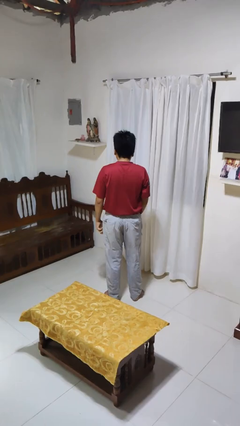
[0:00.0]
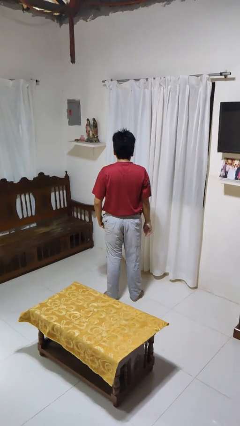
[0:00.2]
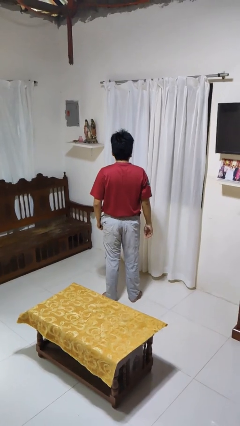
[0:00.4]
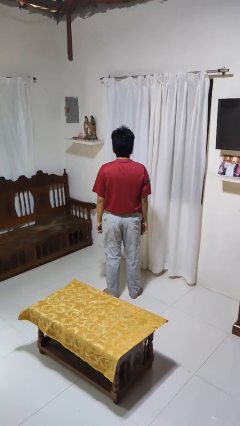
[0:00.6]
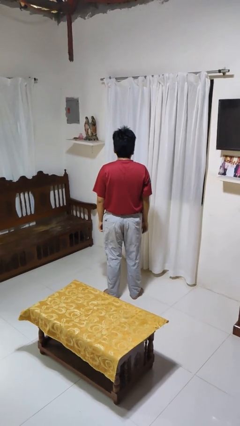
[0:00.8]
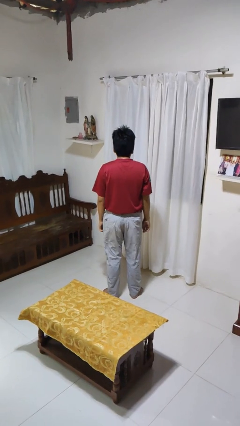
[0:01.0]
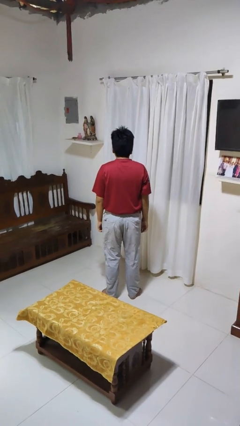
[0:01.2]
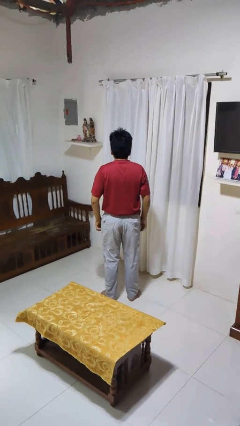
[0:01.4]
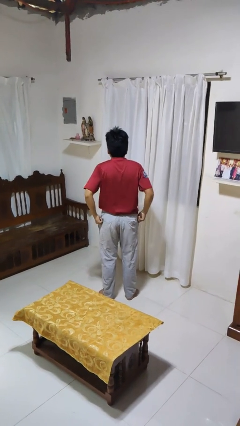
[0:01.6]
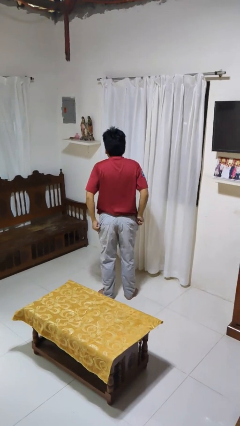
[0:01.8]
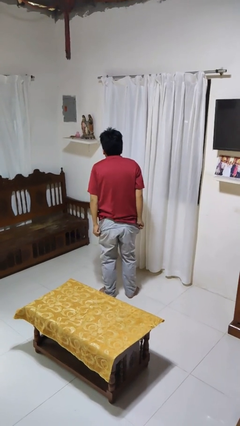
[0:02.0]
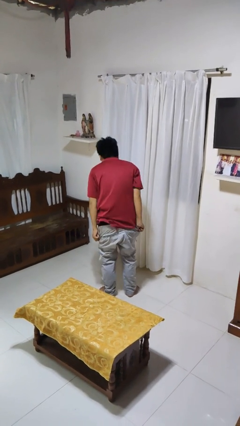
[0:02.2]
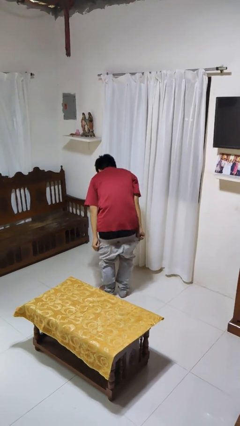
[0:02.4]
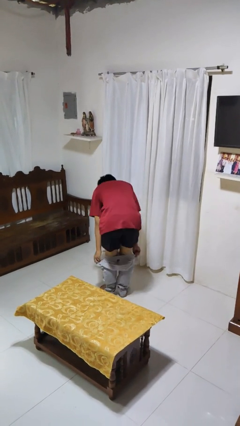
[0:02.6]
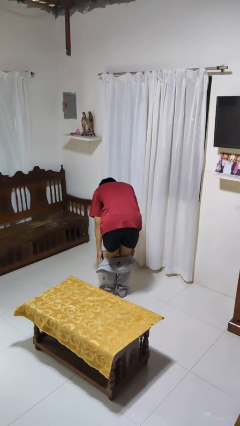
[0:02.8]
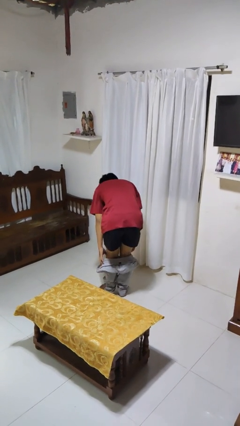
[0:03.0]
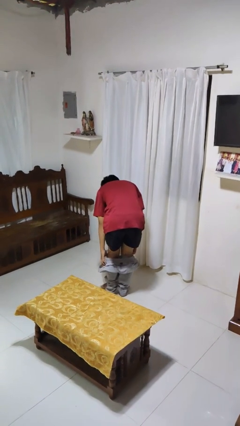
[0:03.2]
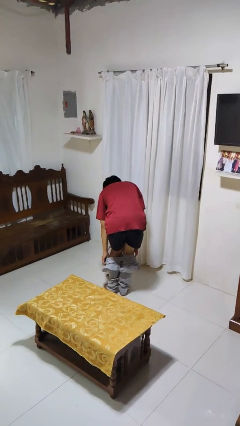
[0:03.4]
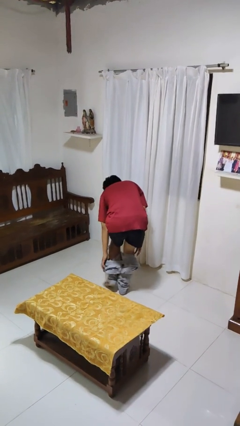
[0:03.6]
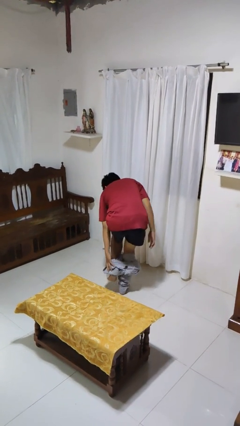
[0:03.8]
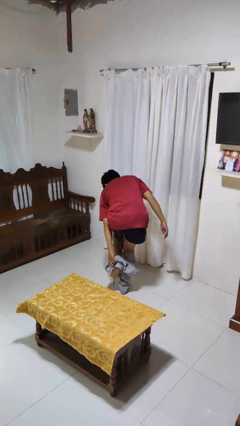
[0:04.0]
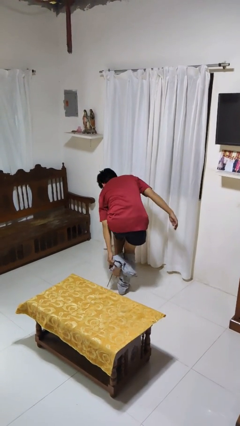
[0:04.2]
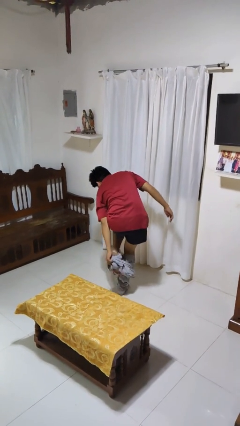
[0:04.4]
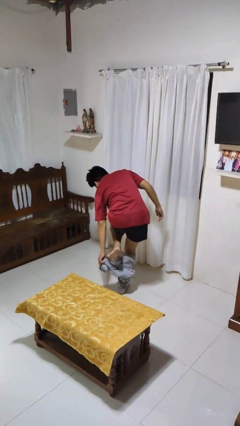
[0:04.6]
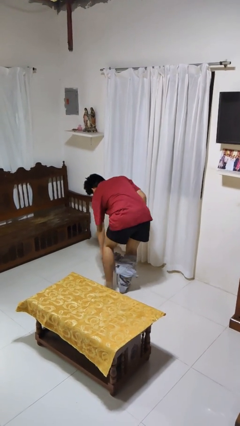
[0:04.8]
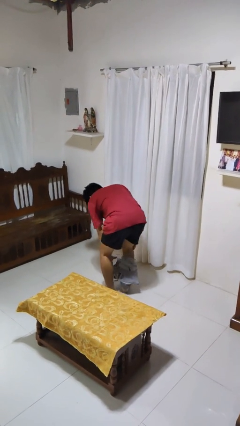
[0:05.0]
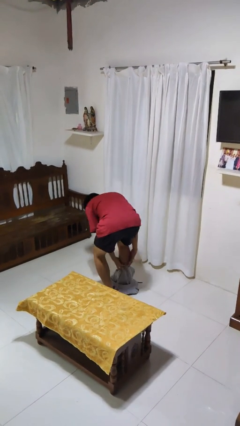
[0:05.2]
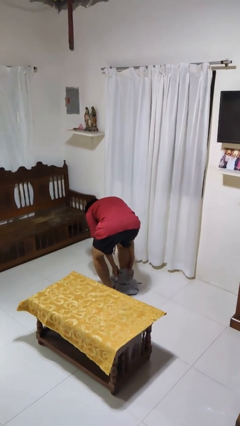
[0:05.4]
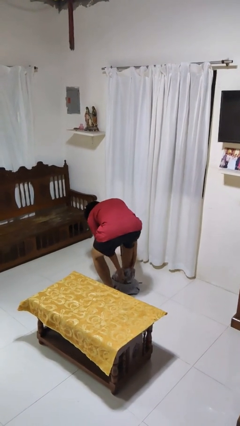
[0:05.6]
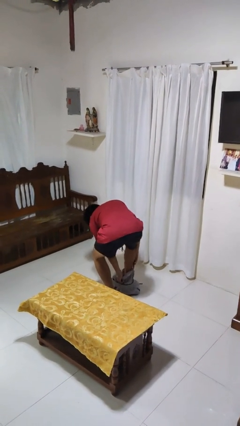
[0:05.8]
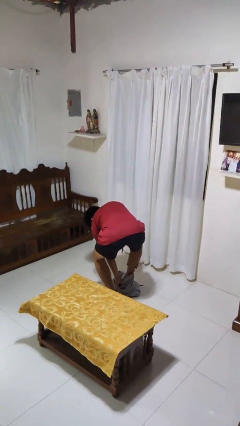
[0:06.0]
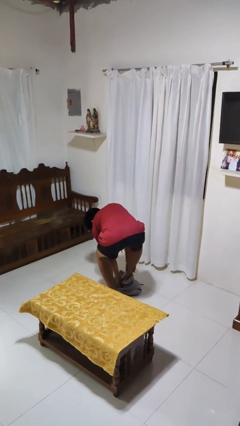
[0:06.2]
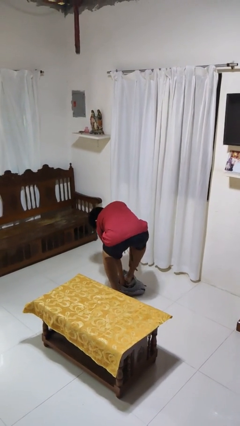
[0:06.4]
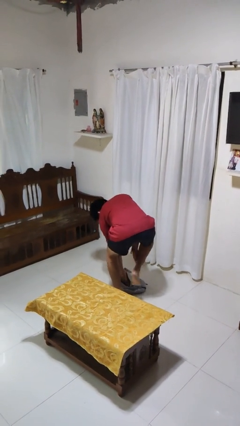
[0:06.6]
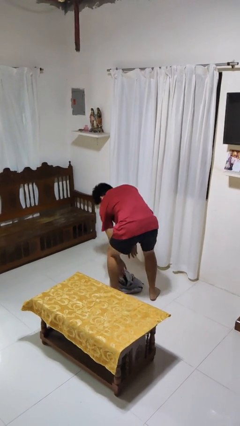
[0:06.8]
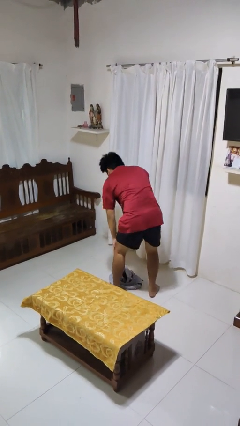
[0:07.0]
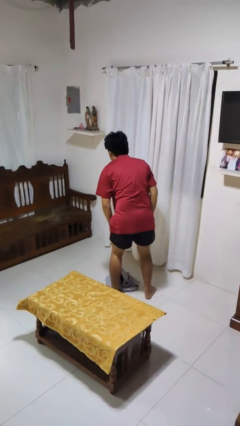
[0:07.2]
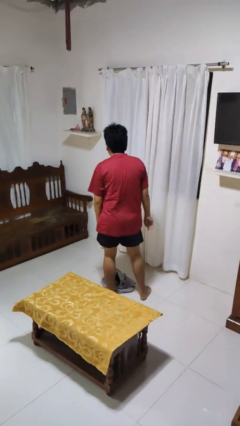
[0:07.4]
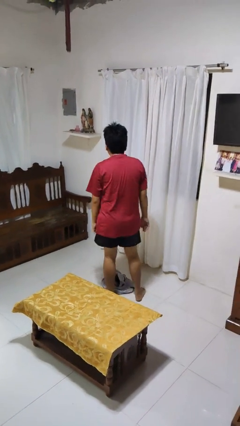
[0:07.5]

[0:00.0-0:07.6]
person takes off pants

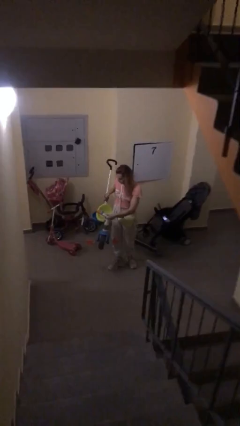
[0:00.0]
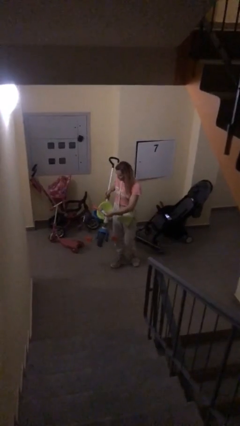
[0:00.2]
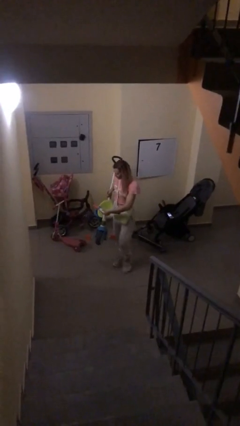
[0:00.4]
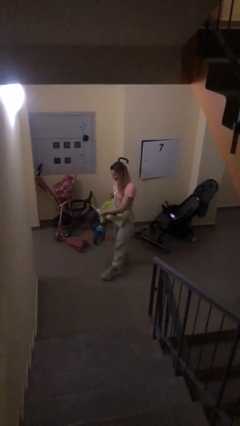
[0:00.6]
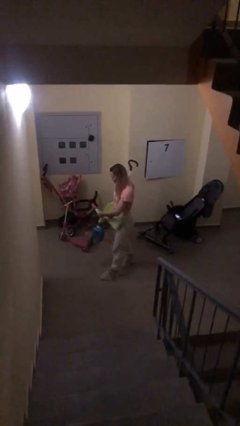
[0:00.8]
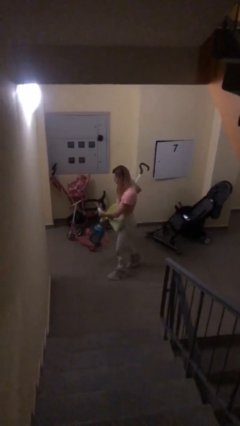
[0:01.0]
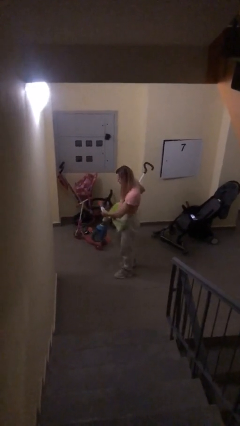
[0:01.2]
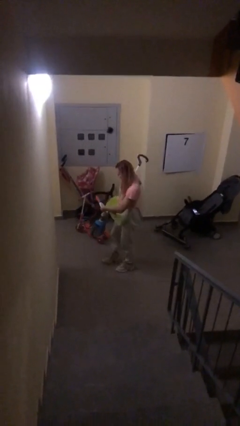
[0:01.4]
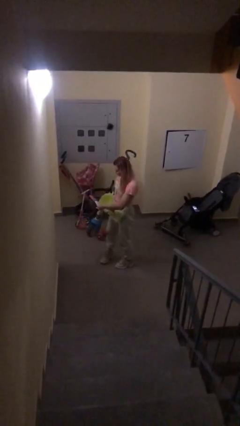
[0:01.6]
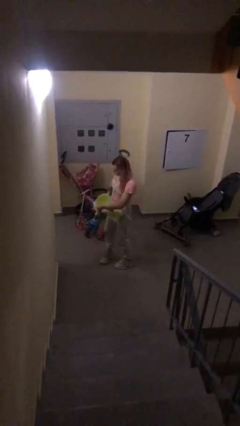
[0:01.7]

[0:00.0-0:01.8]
person carries bicycle

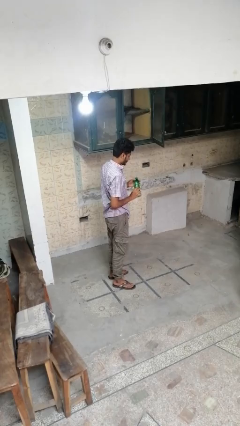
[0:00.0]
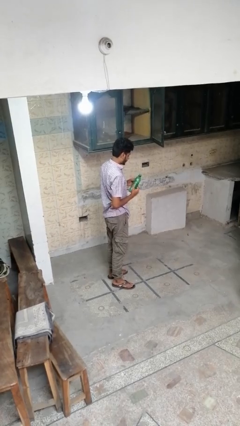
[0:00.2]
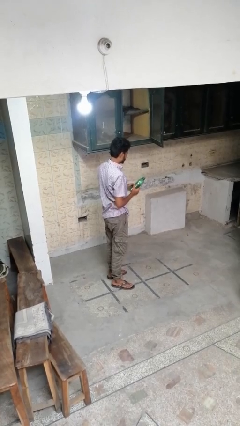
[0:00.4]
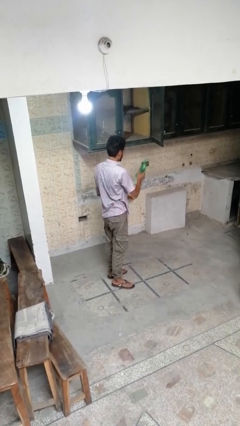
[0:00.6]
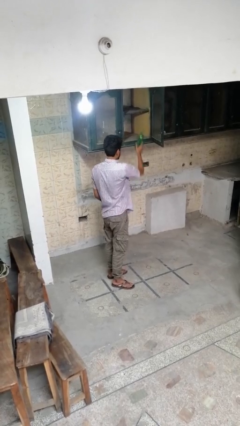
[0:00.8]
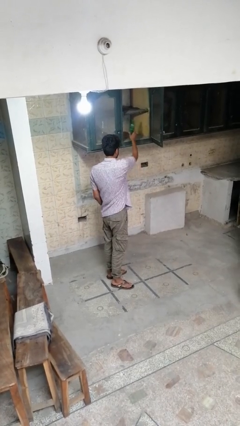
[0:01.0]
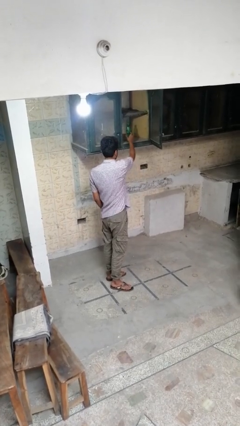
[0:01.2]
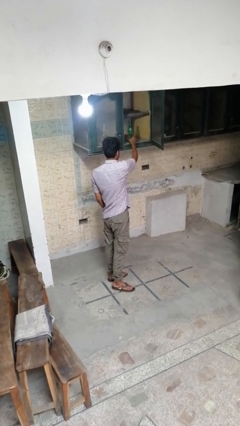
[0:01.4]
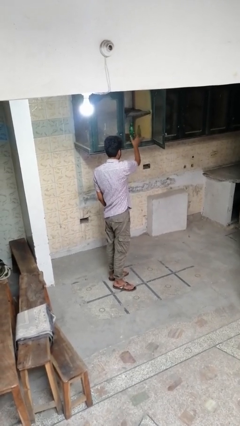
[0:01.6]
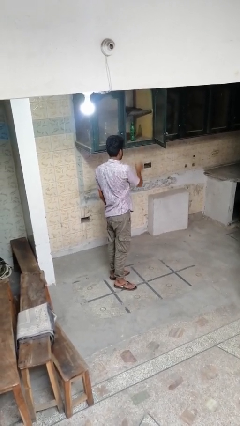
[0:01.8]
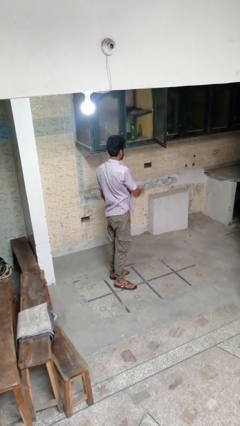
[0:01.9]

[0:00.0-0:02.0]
person puts down object into cabinet

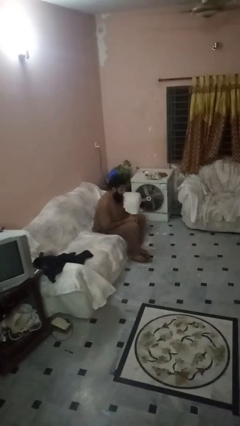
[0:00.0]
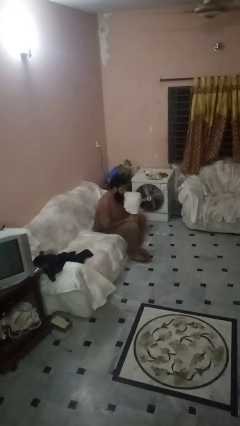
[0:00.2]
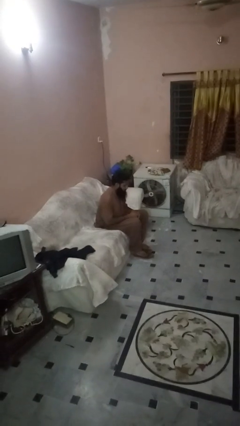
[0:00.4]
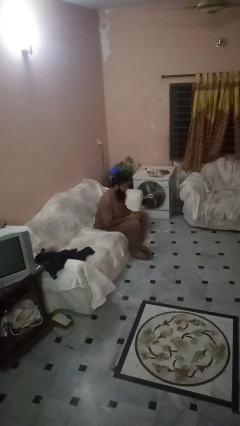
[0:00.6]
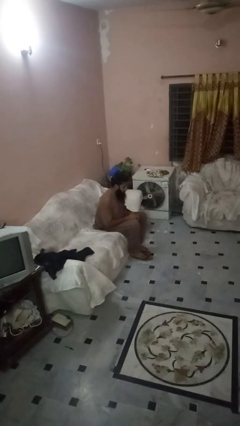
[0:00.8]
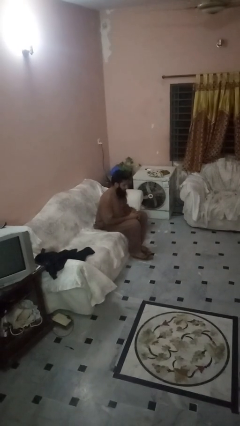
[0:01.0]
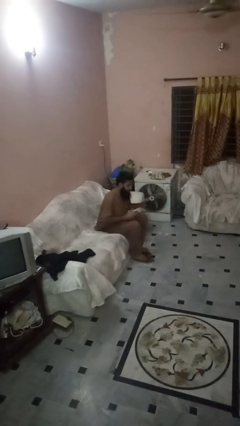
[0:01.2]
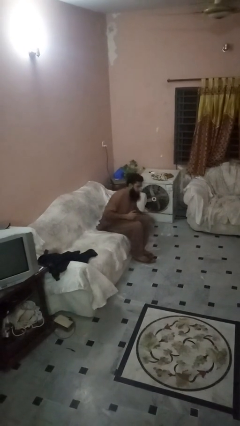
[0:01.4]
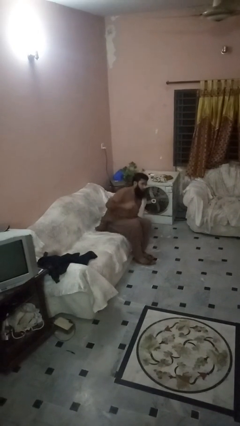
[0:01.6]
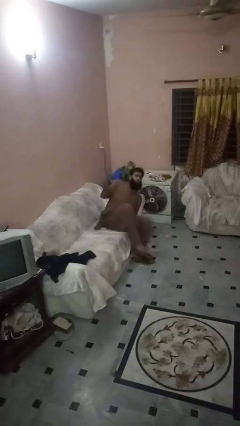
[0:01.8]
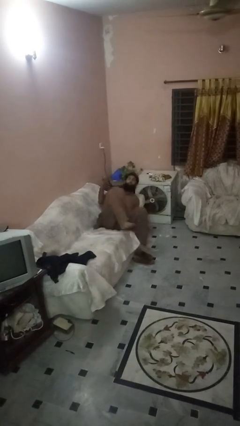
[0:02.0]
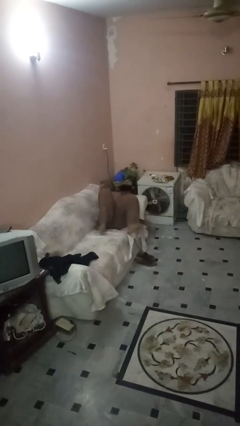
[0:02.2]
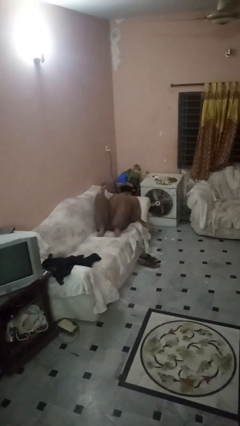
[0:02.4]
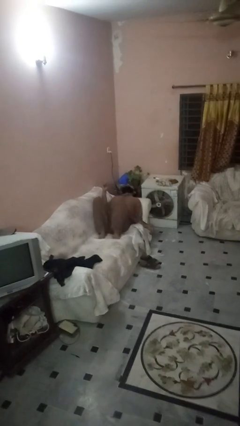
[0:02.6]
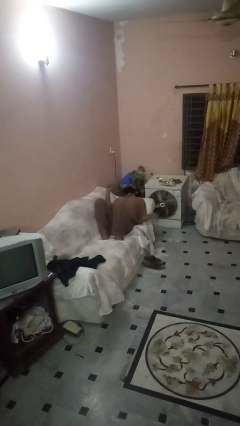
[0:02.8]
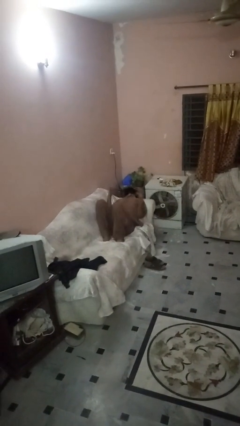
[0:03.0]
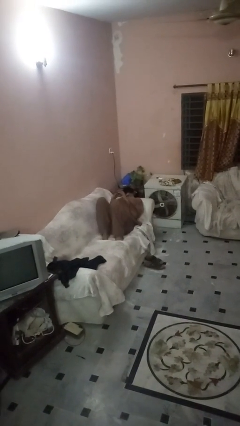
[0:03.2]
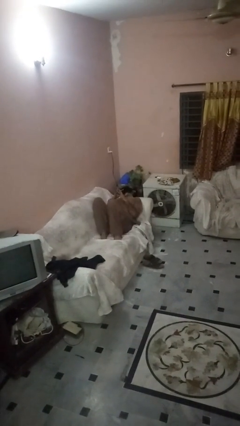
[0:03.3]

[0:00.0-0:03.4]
person lies down on couch

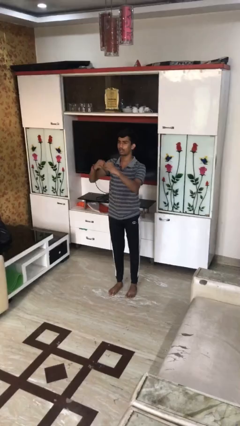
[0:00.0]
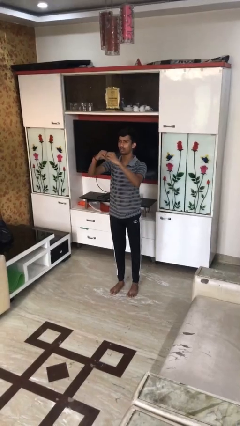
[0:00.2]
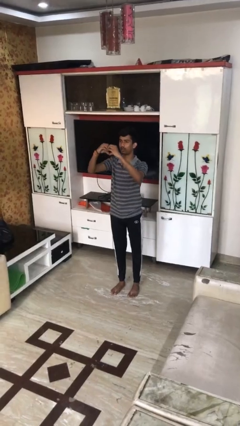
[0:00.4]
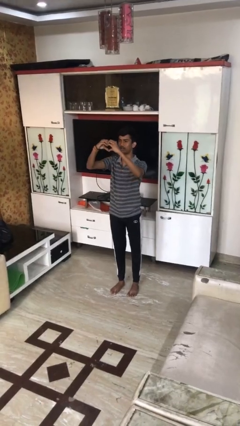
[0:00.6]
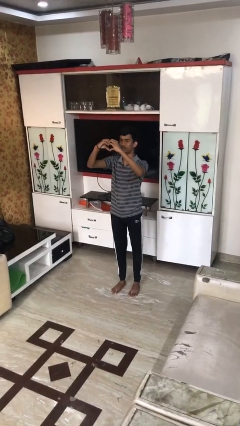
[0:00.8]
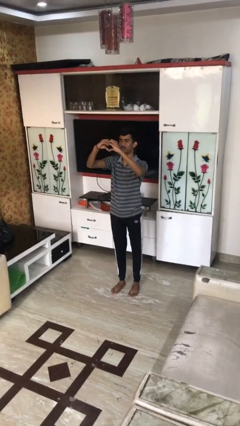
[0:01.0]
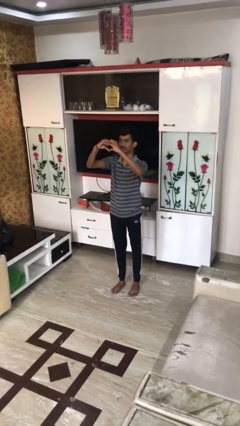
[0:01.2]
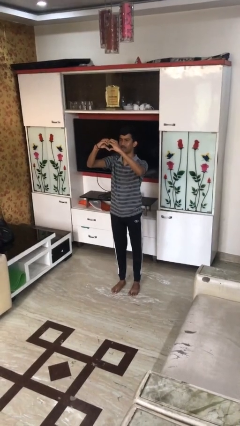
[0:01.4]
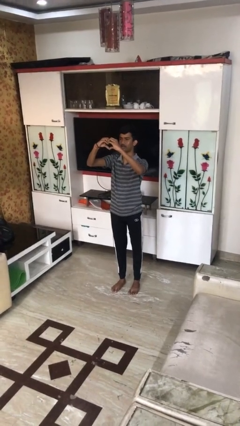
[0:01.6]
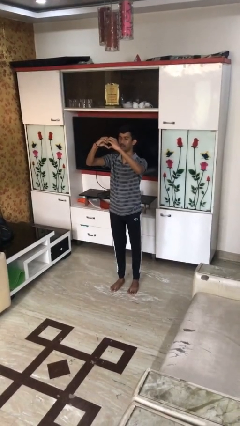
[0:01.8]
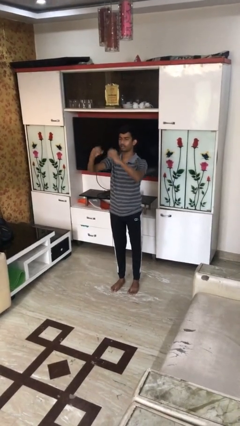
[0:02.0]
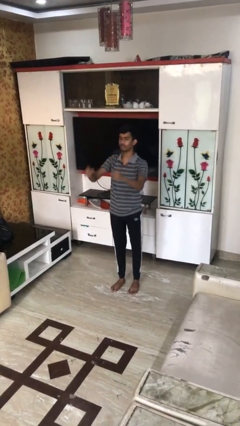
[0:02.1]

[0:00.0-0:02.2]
person gestures heart

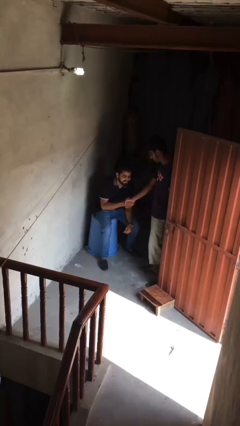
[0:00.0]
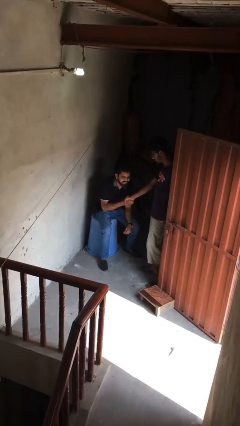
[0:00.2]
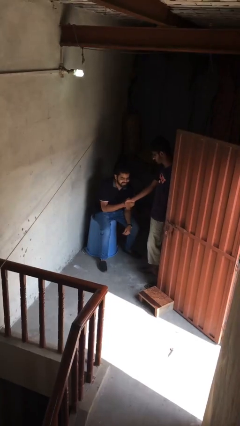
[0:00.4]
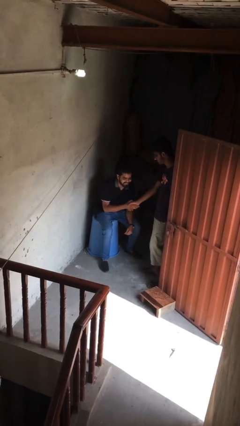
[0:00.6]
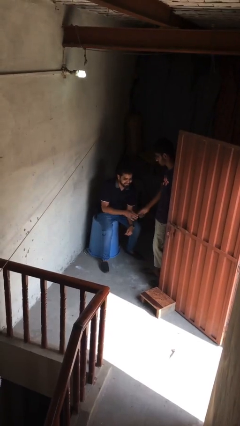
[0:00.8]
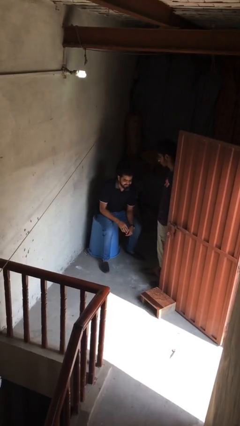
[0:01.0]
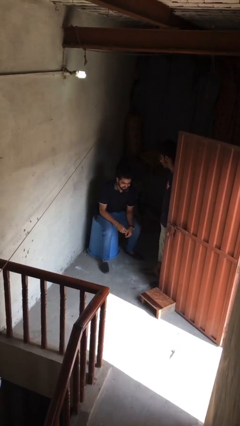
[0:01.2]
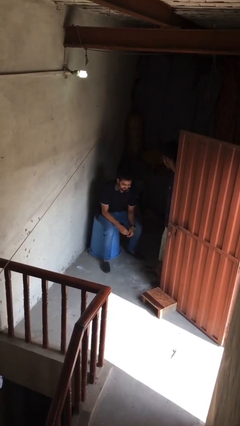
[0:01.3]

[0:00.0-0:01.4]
person shakes hand
